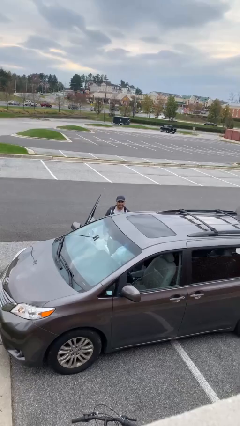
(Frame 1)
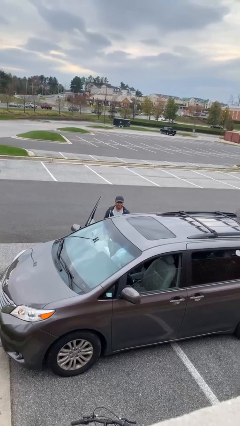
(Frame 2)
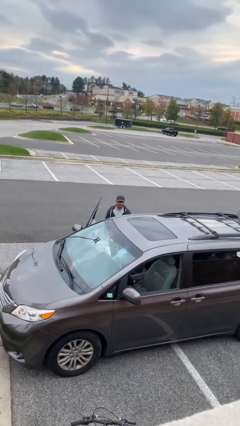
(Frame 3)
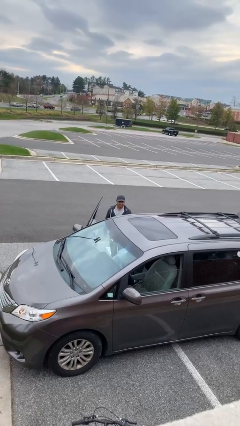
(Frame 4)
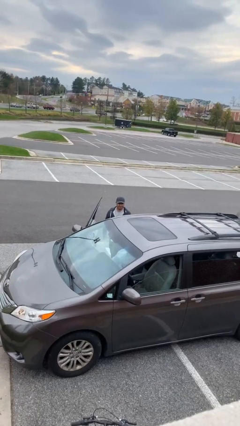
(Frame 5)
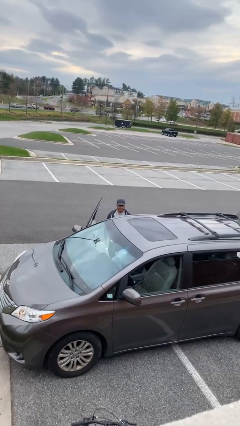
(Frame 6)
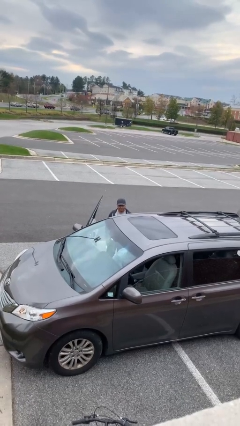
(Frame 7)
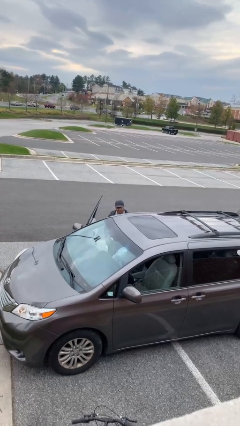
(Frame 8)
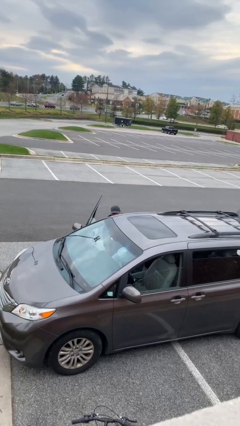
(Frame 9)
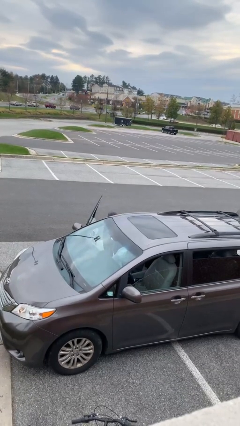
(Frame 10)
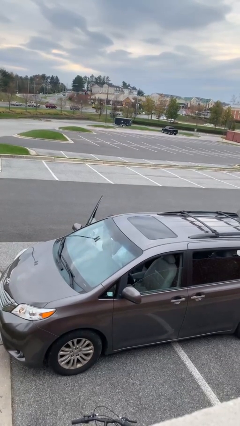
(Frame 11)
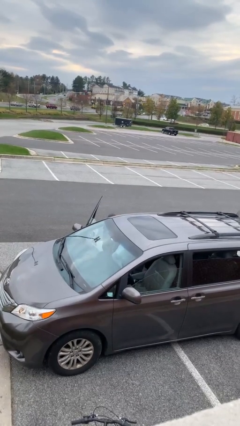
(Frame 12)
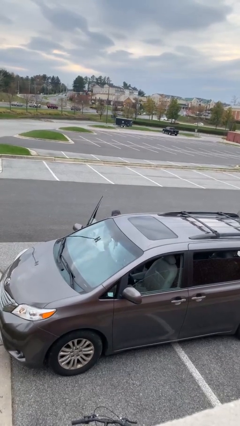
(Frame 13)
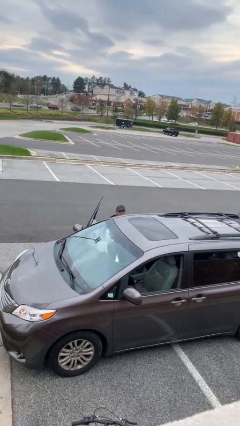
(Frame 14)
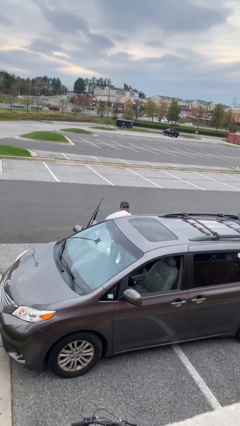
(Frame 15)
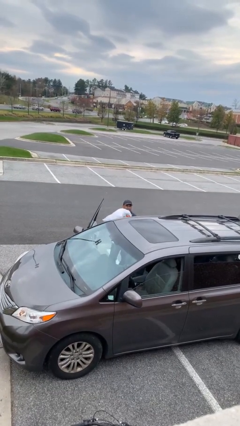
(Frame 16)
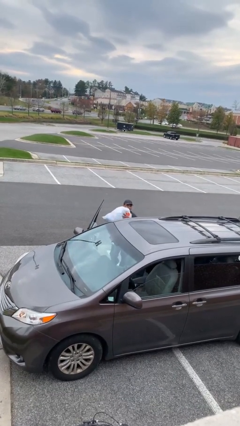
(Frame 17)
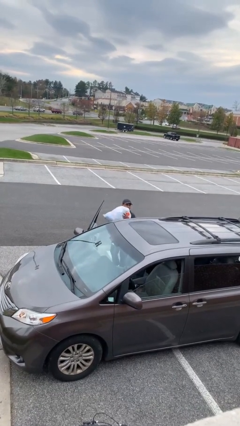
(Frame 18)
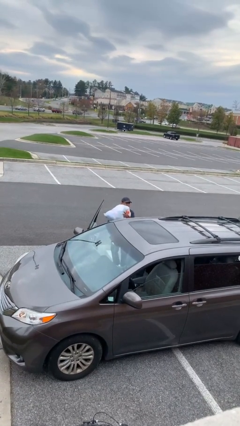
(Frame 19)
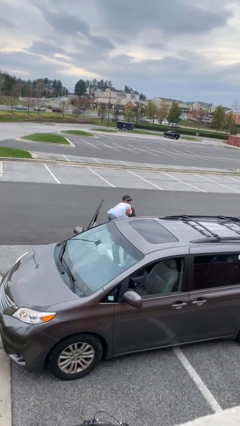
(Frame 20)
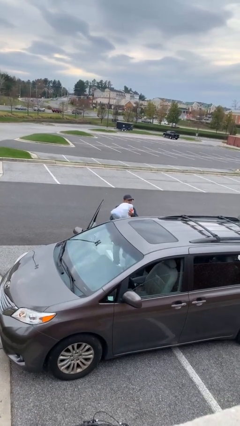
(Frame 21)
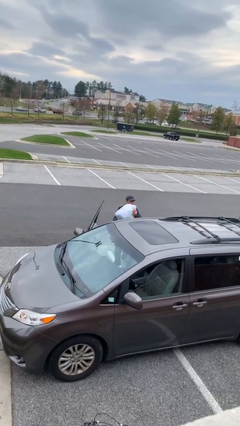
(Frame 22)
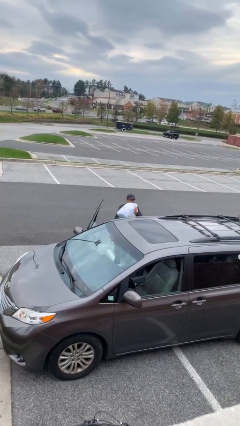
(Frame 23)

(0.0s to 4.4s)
person unloads car

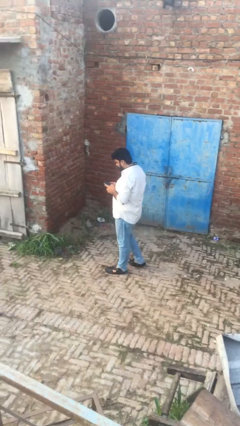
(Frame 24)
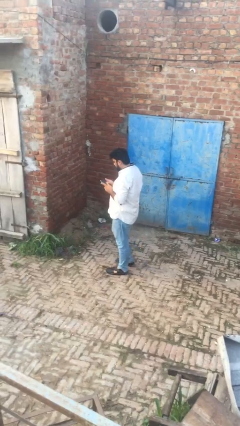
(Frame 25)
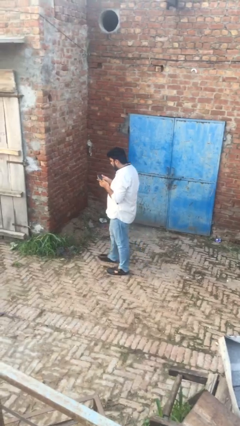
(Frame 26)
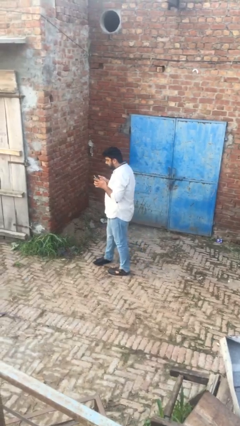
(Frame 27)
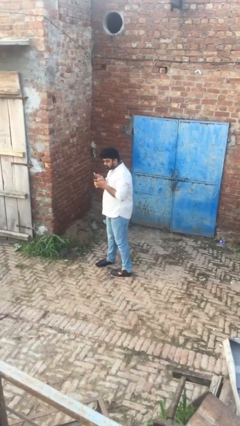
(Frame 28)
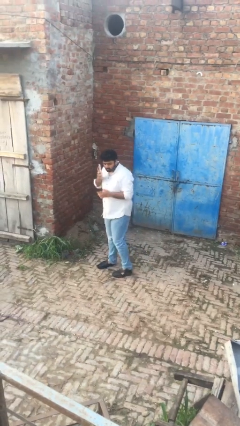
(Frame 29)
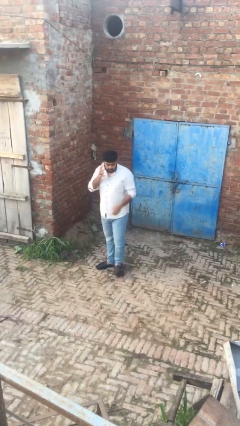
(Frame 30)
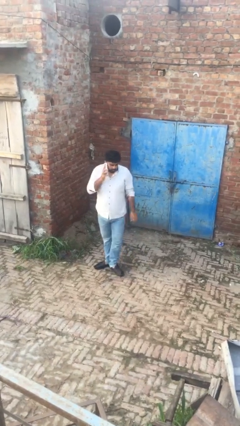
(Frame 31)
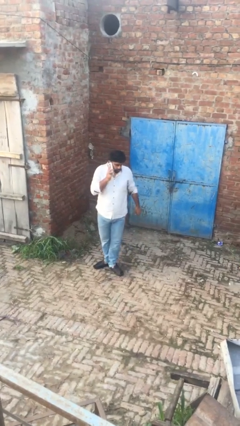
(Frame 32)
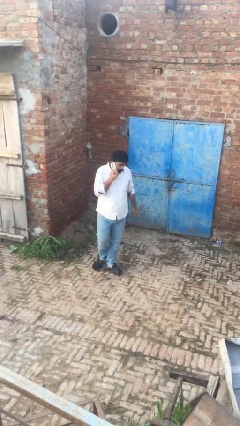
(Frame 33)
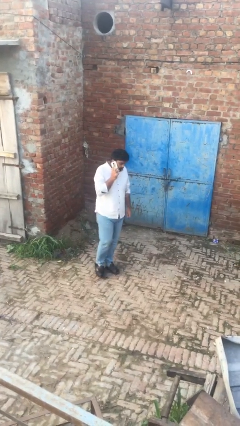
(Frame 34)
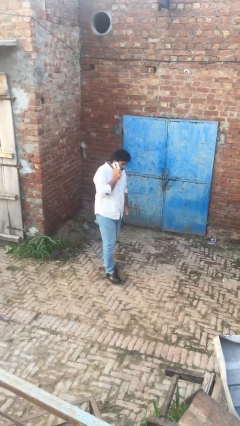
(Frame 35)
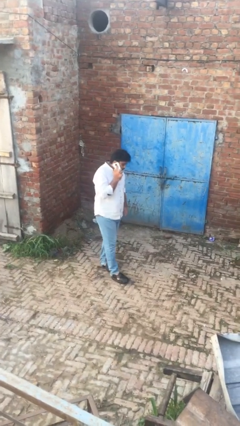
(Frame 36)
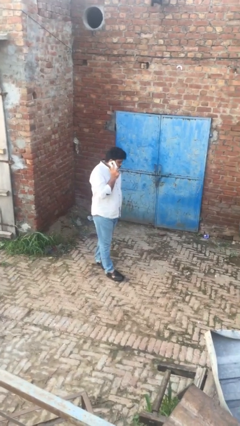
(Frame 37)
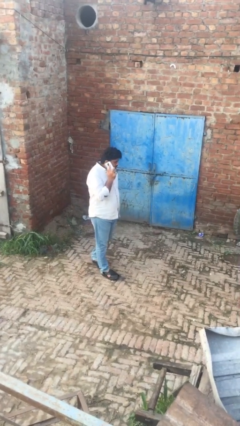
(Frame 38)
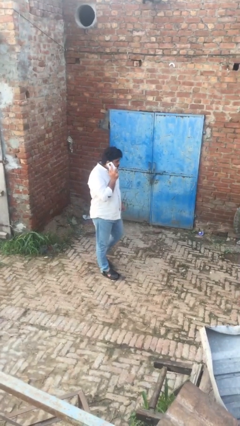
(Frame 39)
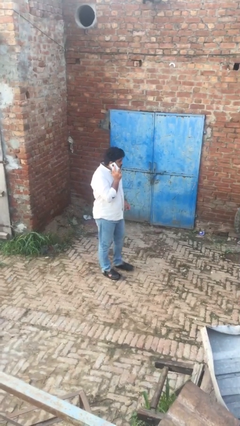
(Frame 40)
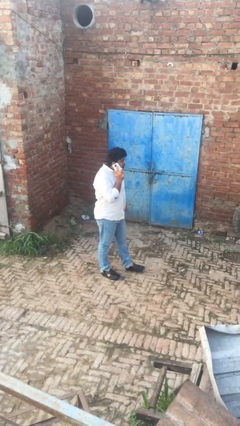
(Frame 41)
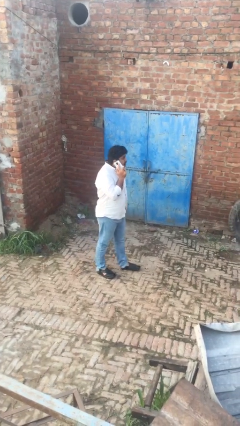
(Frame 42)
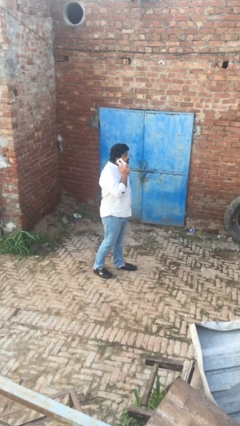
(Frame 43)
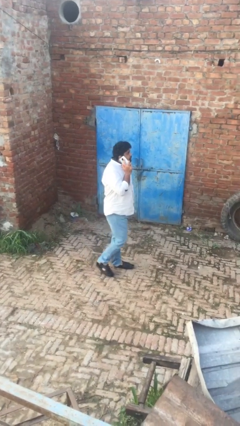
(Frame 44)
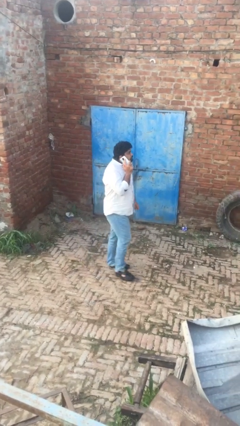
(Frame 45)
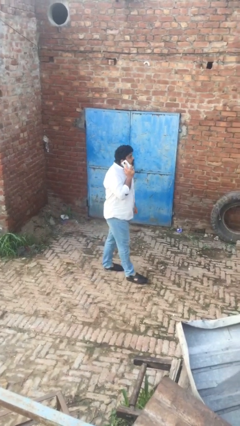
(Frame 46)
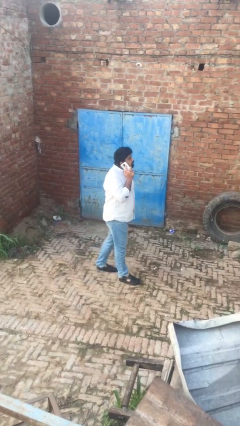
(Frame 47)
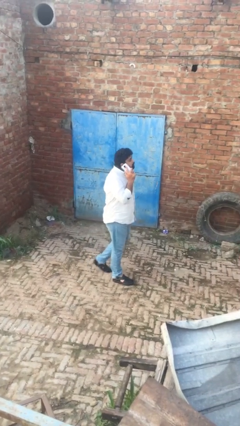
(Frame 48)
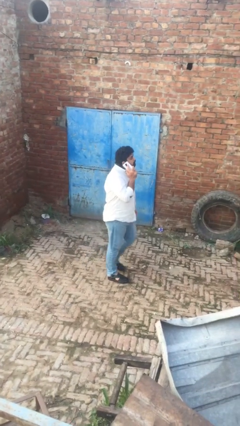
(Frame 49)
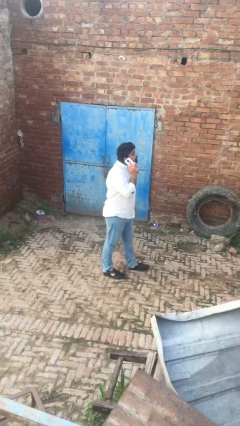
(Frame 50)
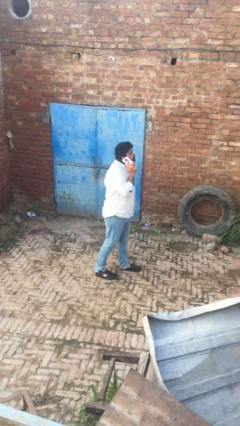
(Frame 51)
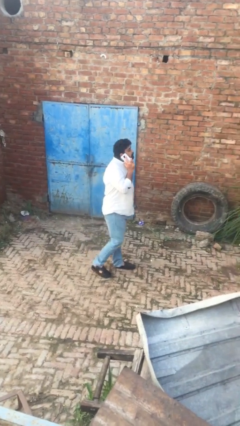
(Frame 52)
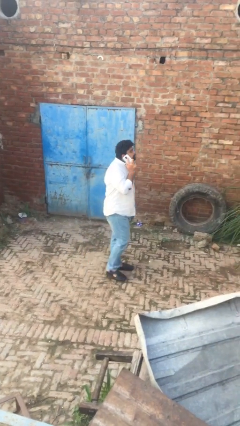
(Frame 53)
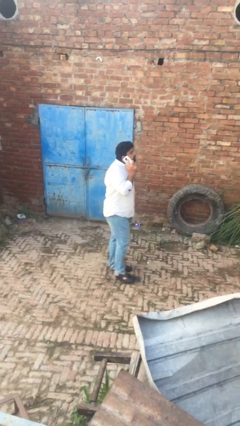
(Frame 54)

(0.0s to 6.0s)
person talks on phone

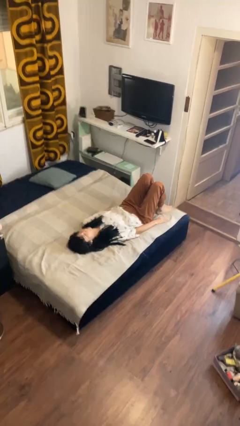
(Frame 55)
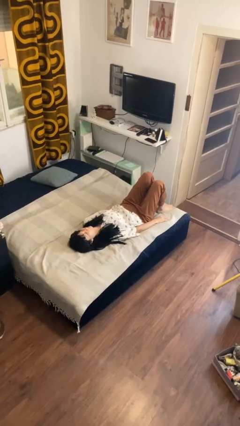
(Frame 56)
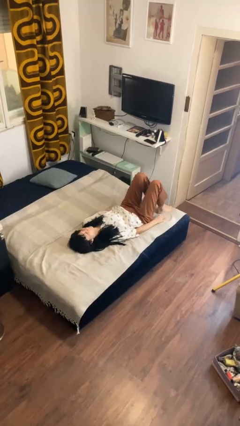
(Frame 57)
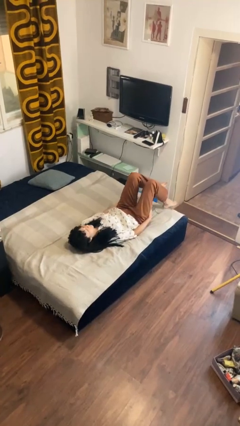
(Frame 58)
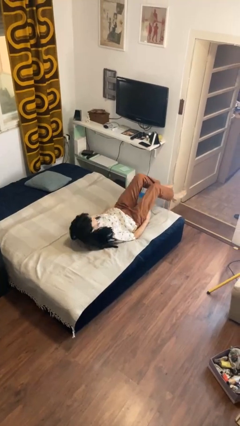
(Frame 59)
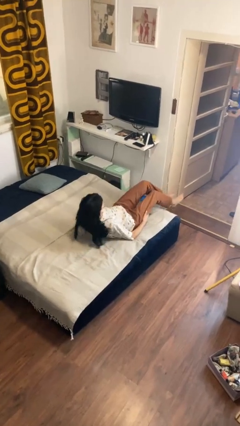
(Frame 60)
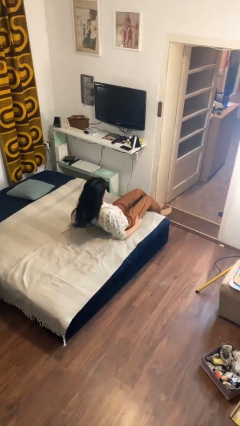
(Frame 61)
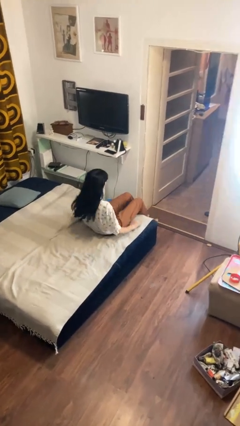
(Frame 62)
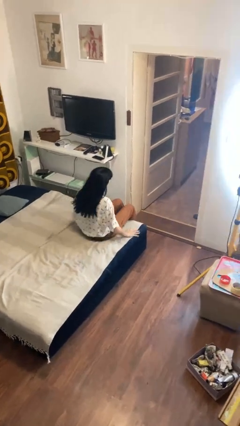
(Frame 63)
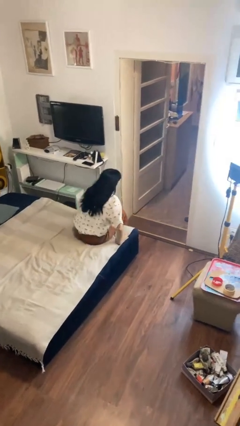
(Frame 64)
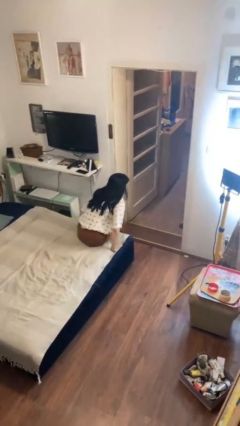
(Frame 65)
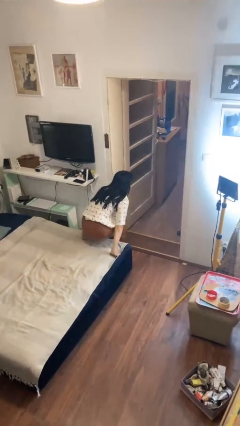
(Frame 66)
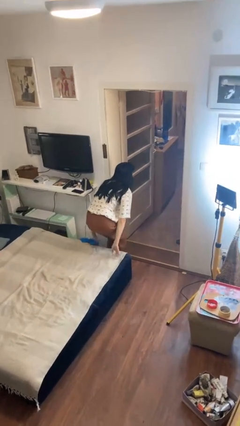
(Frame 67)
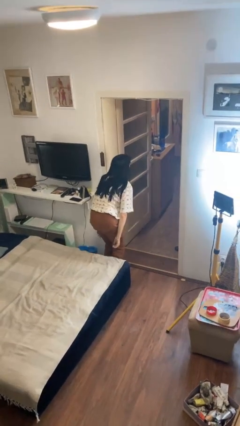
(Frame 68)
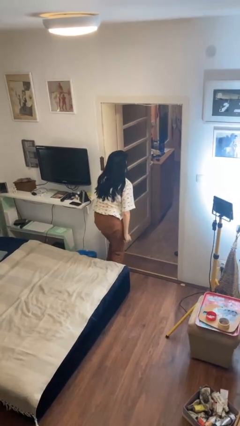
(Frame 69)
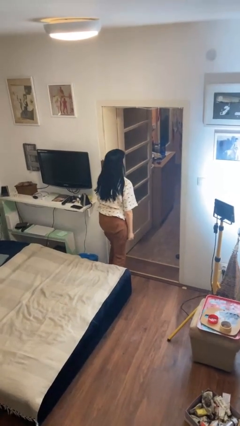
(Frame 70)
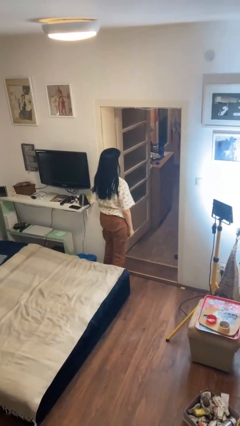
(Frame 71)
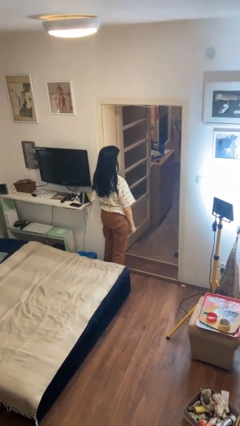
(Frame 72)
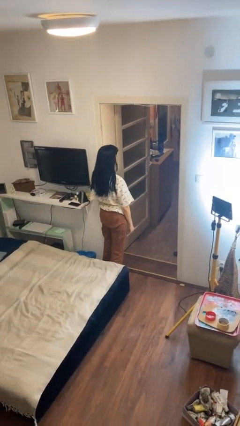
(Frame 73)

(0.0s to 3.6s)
person stands up

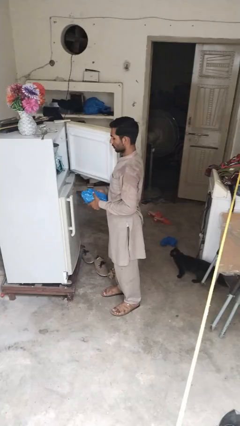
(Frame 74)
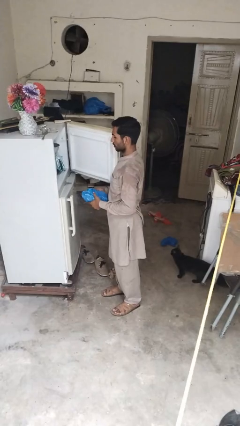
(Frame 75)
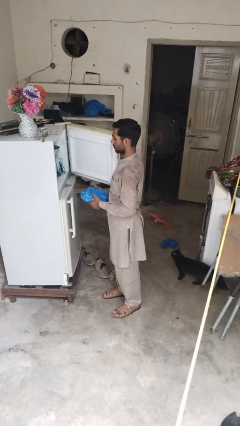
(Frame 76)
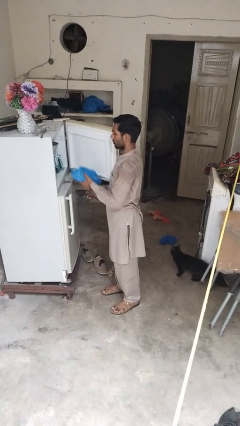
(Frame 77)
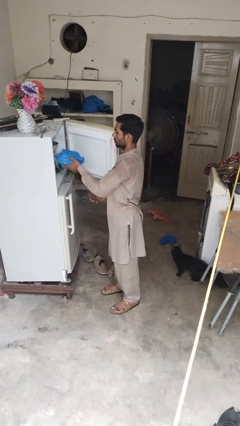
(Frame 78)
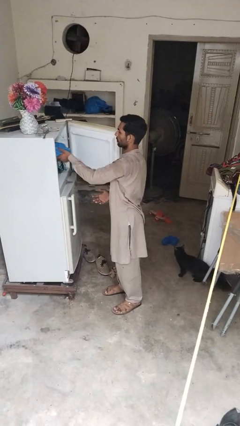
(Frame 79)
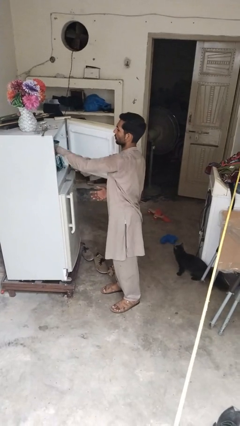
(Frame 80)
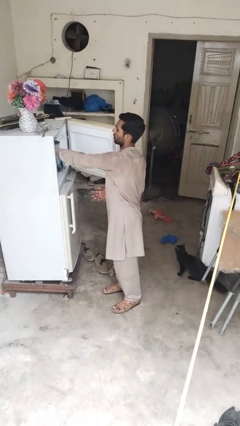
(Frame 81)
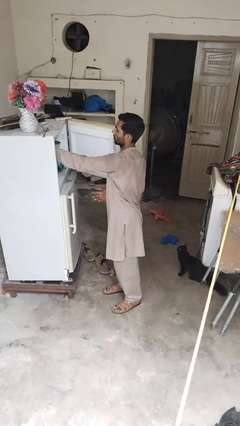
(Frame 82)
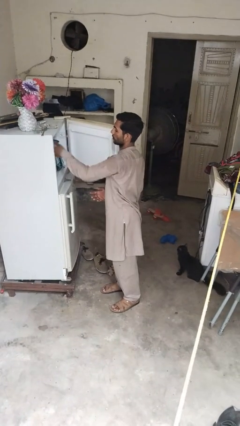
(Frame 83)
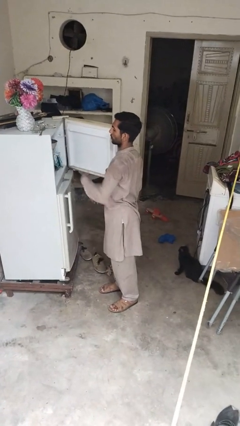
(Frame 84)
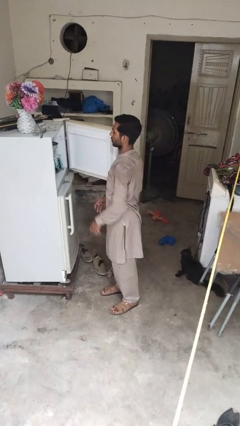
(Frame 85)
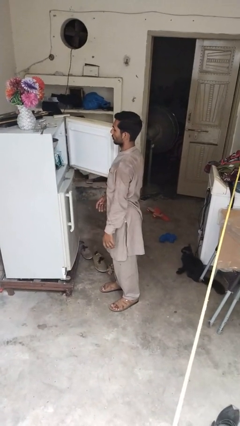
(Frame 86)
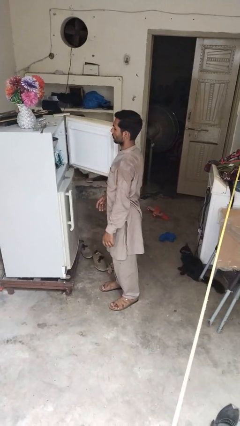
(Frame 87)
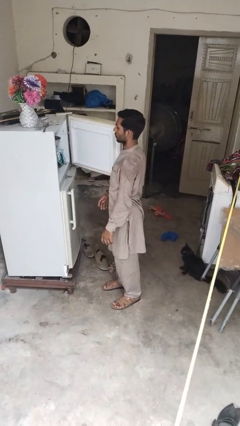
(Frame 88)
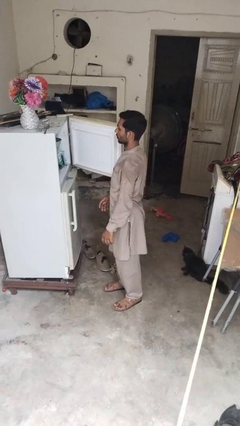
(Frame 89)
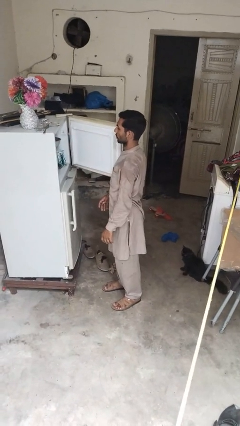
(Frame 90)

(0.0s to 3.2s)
person loads groceries into refrigerator

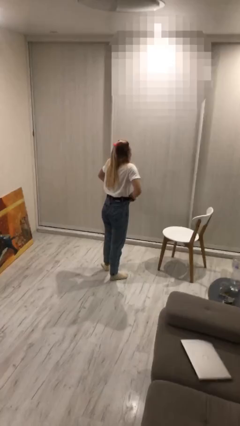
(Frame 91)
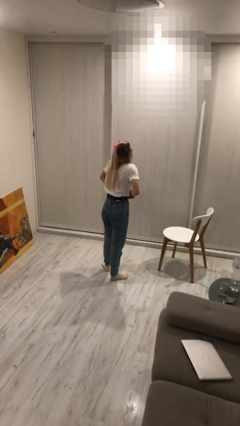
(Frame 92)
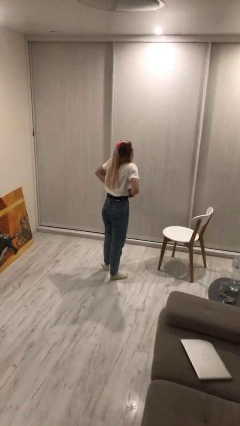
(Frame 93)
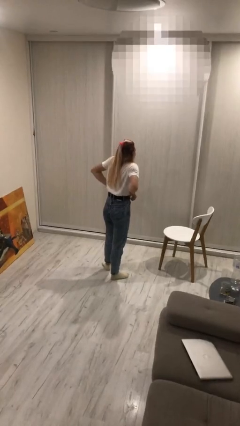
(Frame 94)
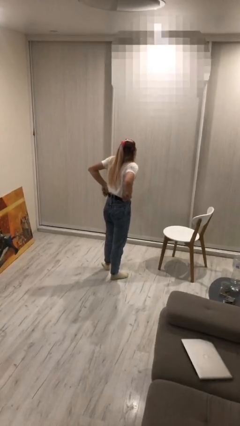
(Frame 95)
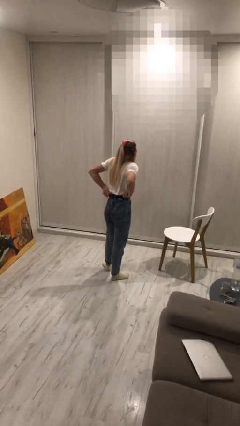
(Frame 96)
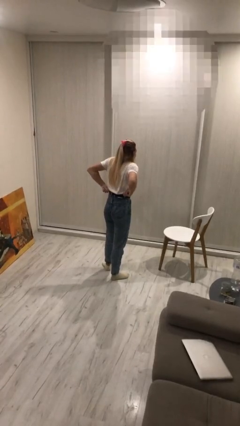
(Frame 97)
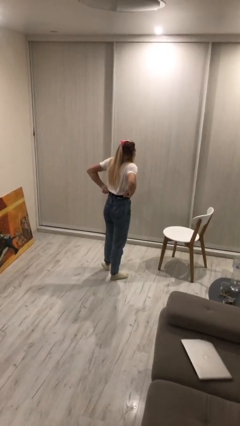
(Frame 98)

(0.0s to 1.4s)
person hikes up pants
